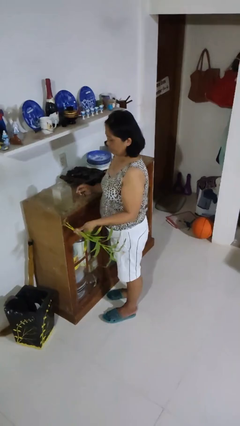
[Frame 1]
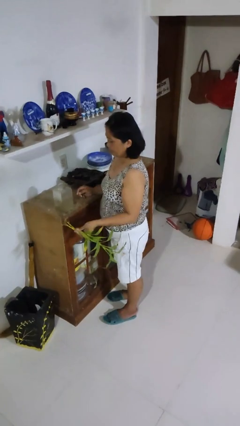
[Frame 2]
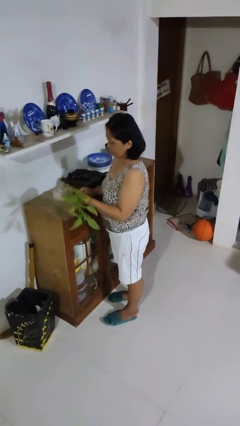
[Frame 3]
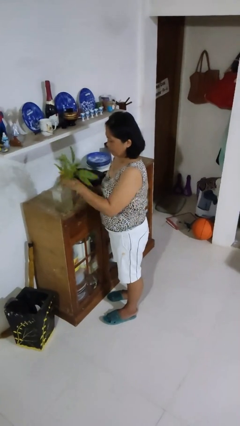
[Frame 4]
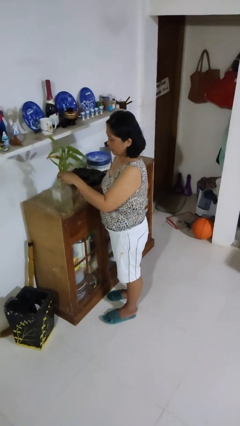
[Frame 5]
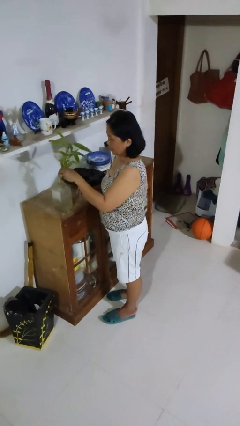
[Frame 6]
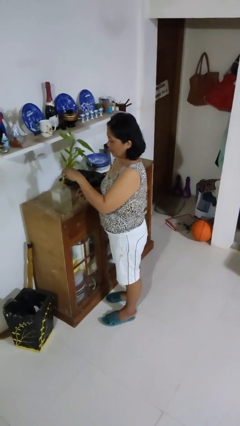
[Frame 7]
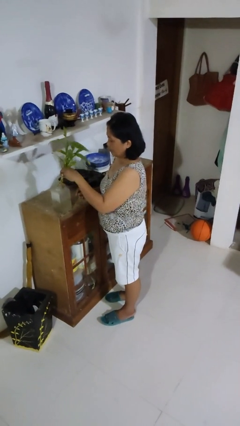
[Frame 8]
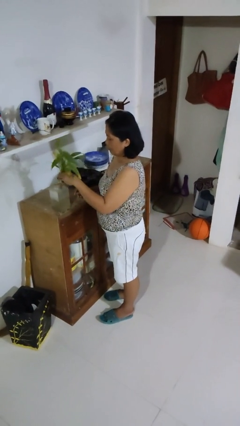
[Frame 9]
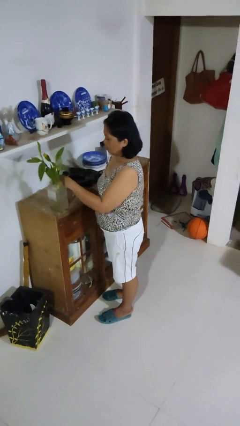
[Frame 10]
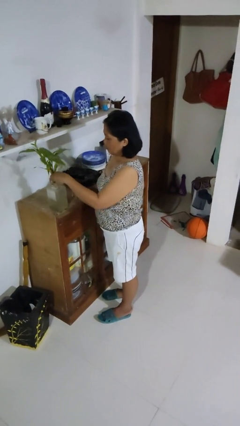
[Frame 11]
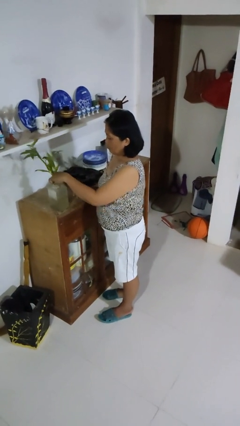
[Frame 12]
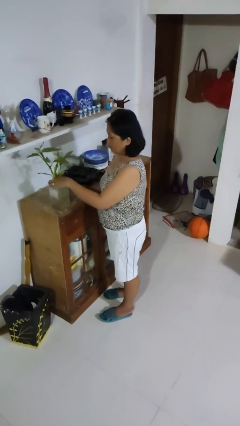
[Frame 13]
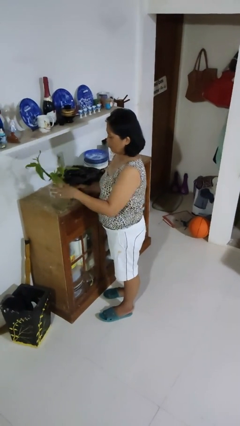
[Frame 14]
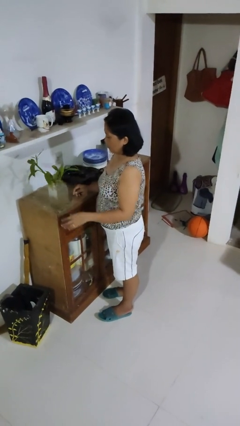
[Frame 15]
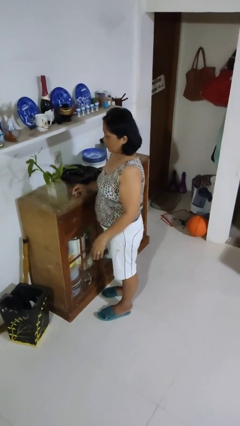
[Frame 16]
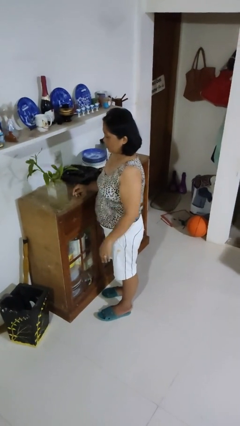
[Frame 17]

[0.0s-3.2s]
person arranges flowers in vase

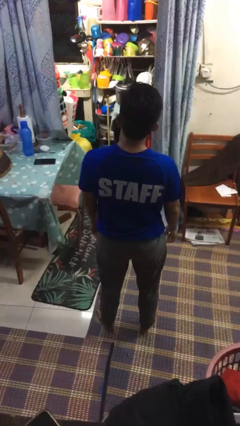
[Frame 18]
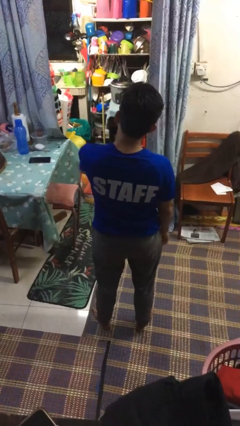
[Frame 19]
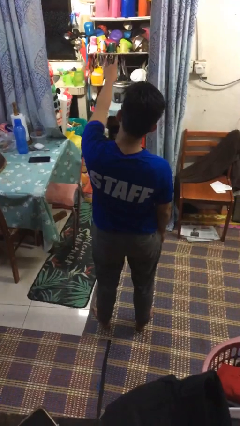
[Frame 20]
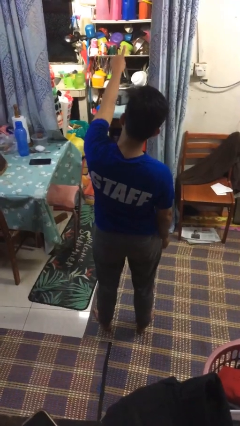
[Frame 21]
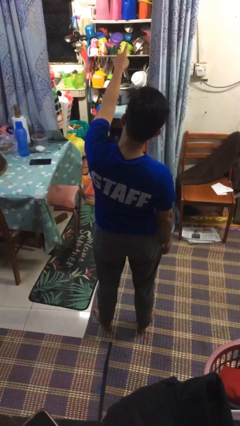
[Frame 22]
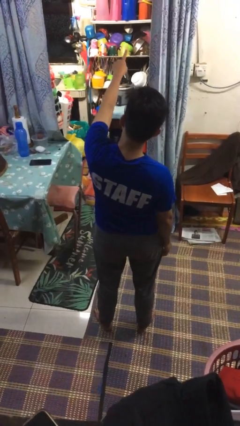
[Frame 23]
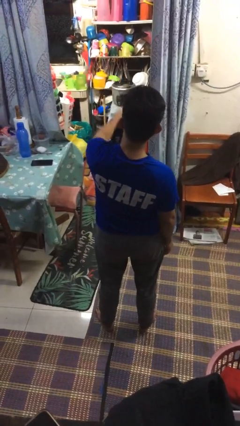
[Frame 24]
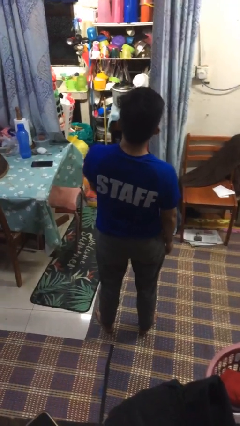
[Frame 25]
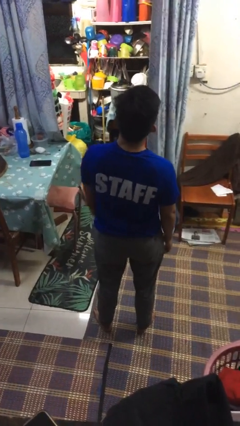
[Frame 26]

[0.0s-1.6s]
person points at person

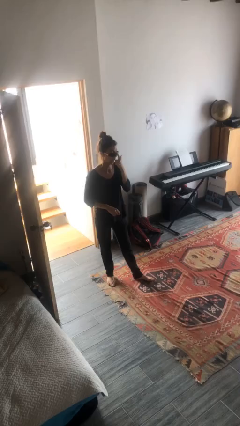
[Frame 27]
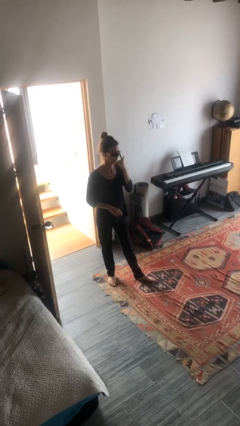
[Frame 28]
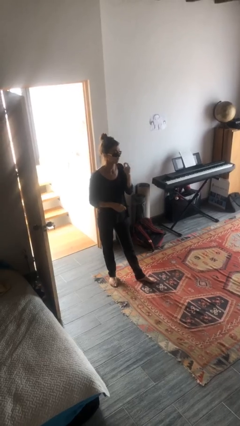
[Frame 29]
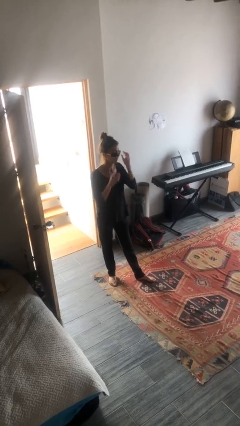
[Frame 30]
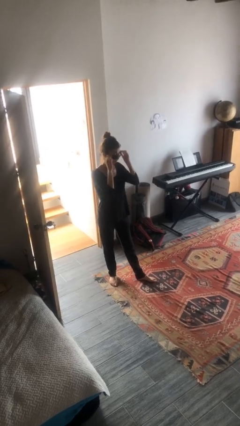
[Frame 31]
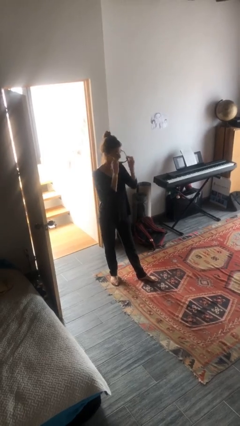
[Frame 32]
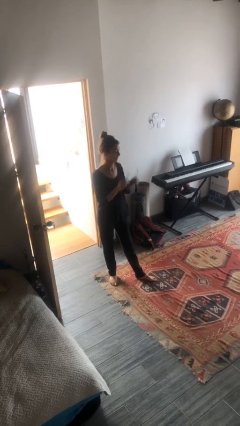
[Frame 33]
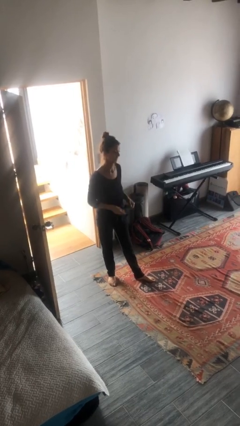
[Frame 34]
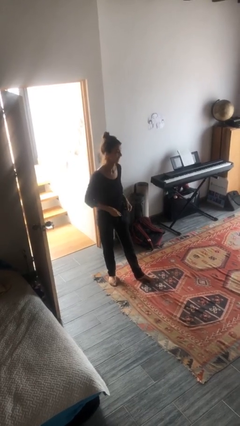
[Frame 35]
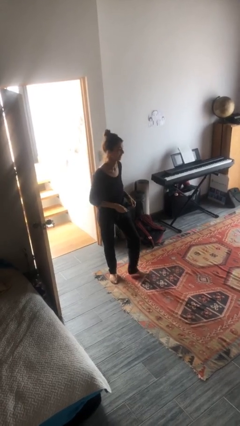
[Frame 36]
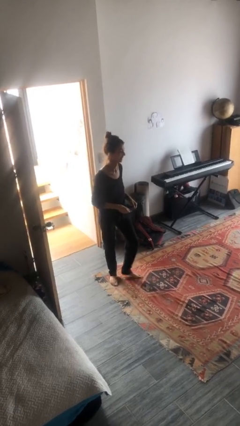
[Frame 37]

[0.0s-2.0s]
person takes off sunglasses

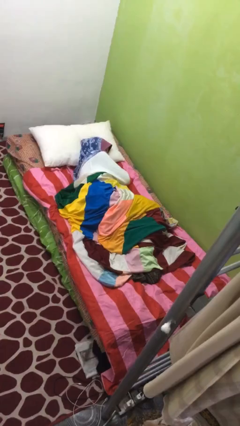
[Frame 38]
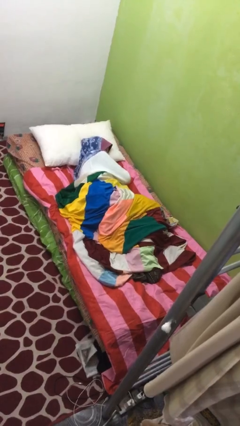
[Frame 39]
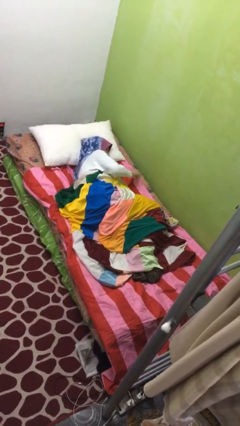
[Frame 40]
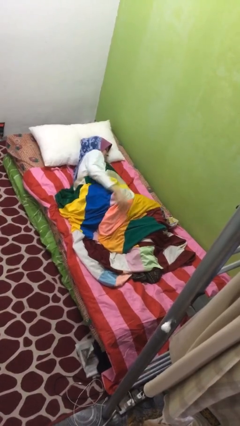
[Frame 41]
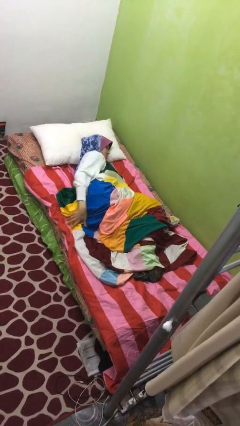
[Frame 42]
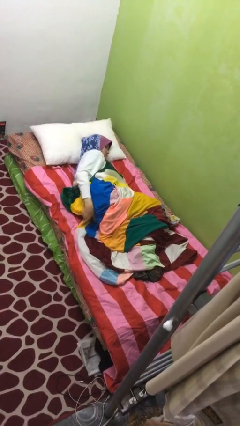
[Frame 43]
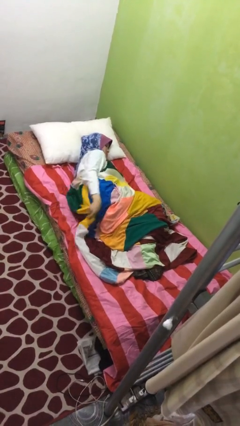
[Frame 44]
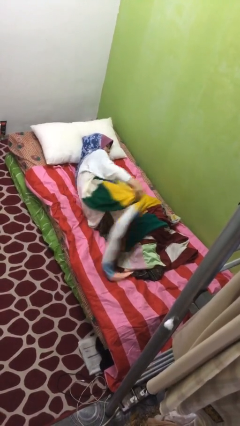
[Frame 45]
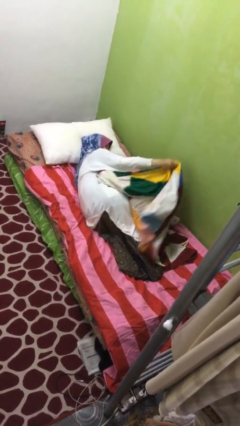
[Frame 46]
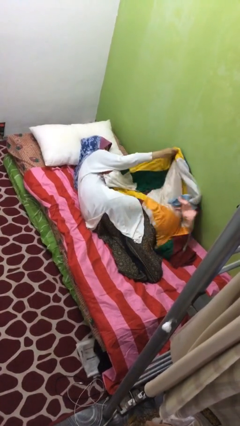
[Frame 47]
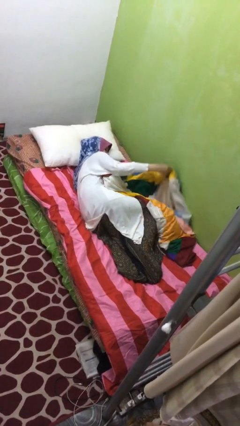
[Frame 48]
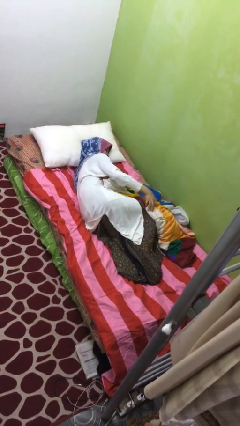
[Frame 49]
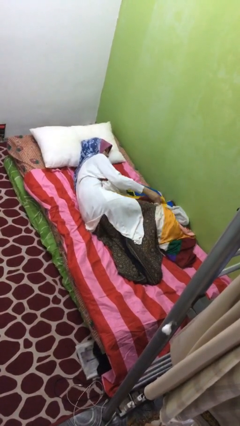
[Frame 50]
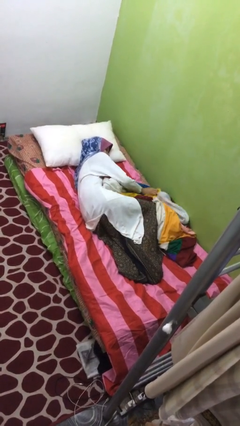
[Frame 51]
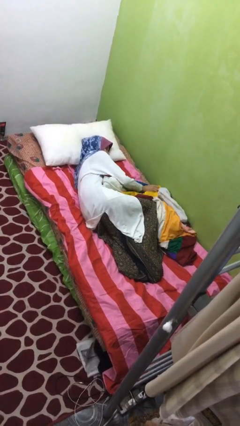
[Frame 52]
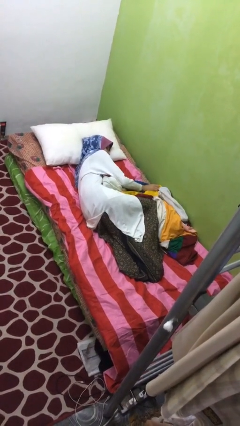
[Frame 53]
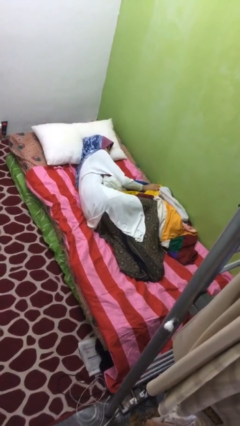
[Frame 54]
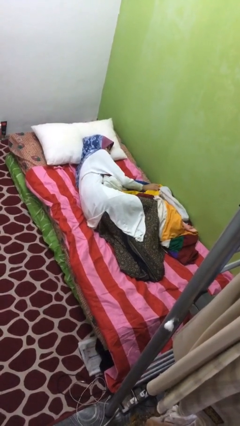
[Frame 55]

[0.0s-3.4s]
person uncovers with blanket

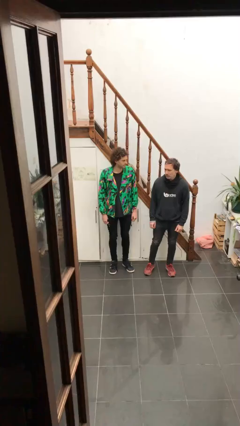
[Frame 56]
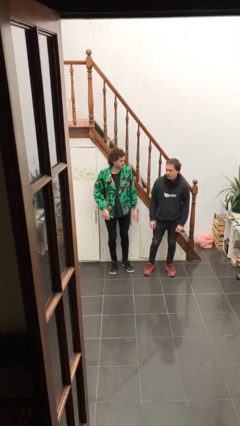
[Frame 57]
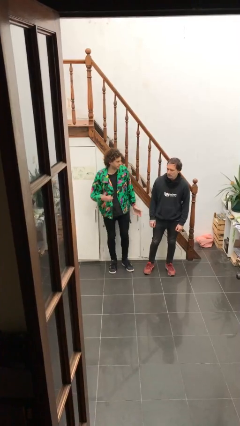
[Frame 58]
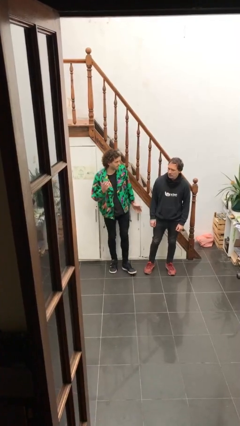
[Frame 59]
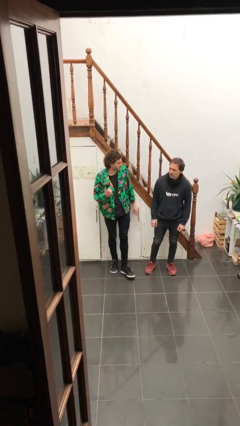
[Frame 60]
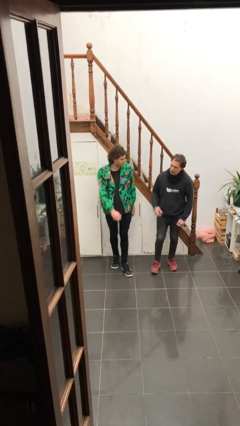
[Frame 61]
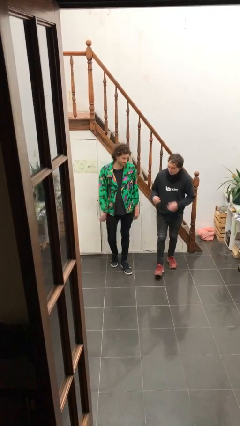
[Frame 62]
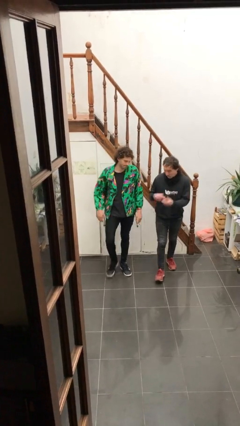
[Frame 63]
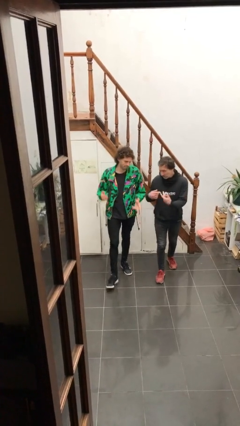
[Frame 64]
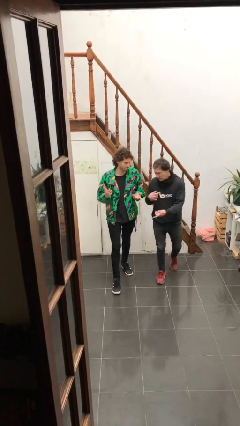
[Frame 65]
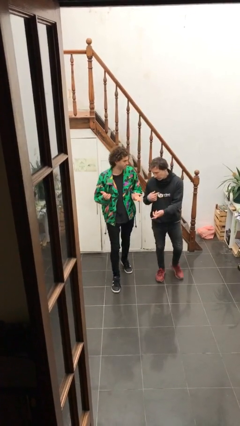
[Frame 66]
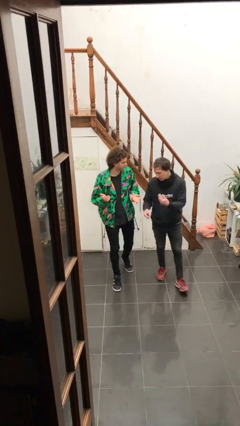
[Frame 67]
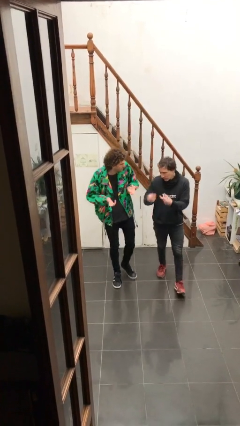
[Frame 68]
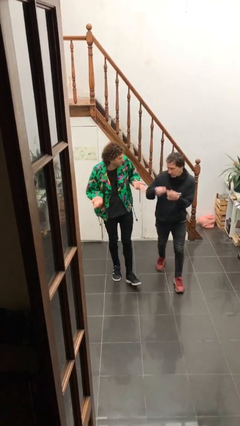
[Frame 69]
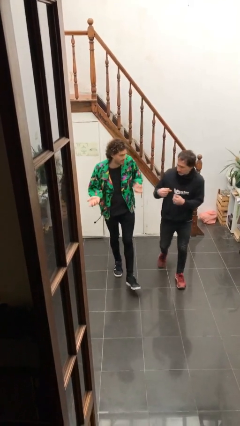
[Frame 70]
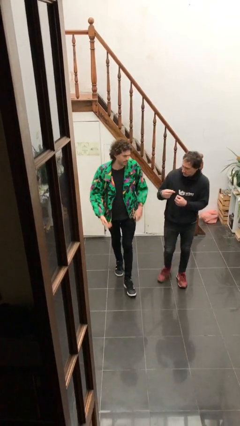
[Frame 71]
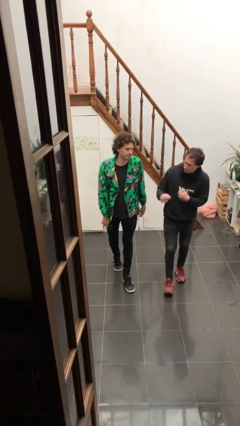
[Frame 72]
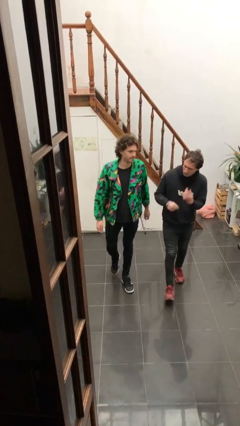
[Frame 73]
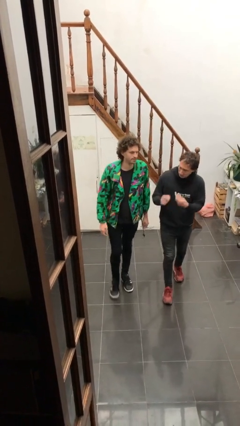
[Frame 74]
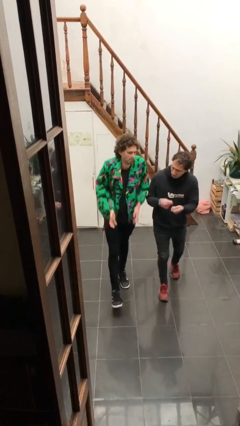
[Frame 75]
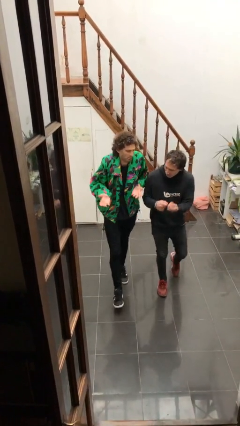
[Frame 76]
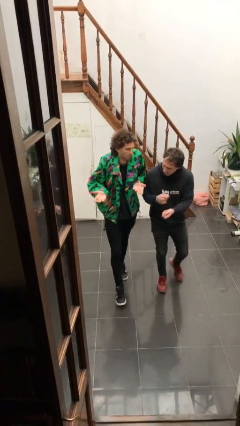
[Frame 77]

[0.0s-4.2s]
person talks to person

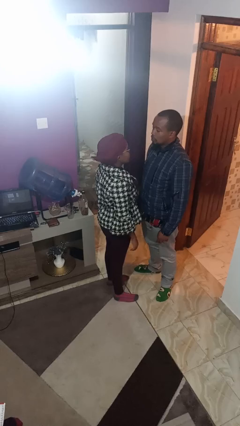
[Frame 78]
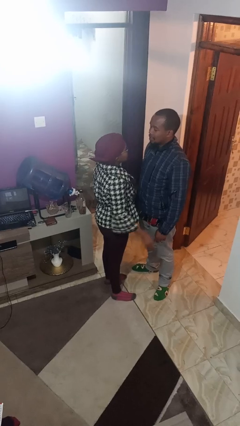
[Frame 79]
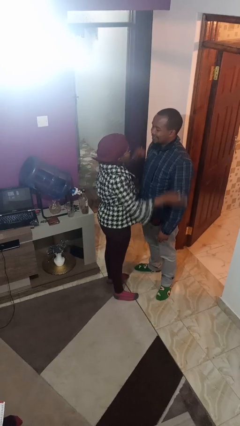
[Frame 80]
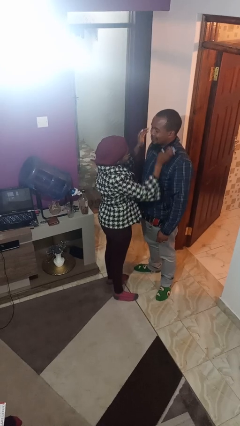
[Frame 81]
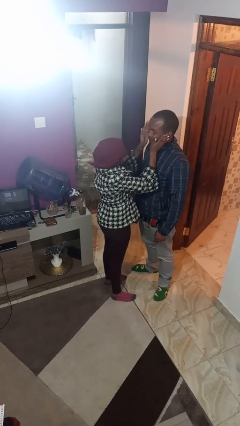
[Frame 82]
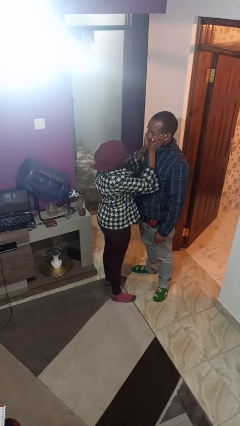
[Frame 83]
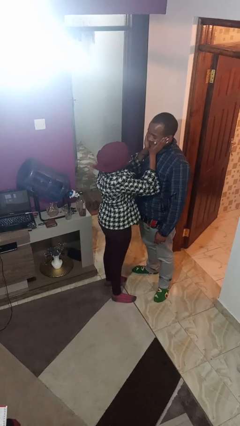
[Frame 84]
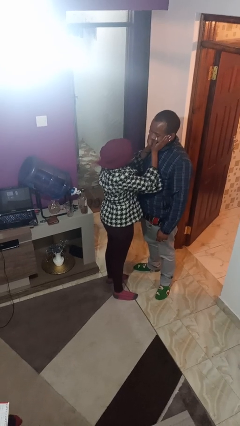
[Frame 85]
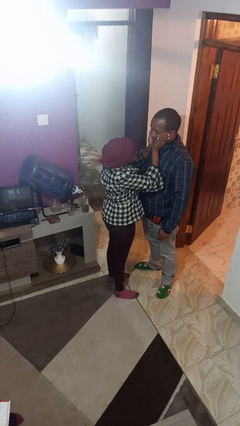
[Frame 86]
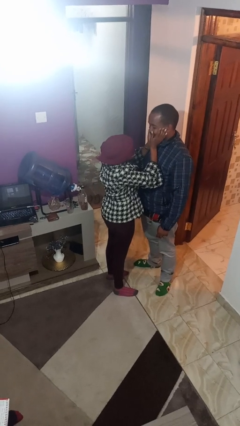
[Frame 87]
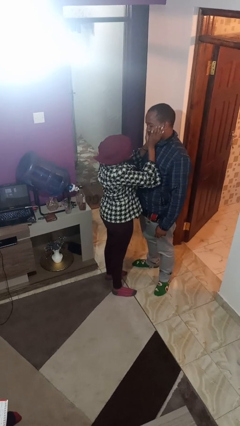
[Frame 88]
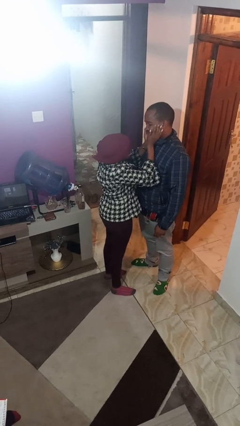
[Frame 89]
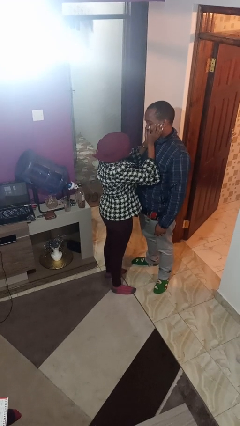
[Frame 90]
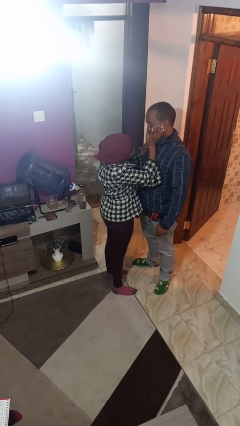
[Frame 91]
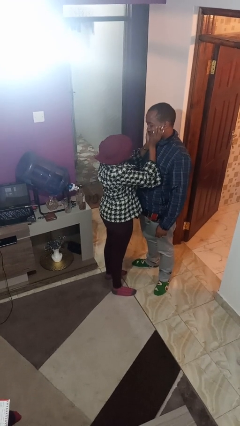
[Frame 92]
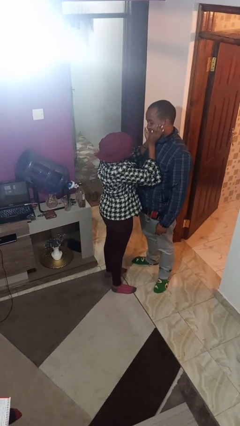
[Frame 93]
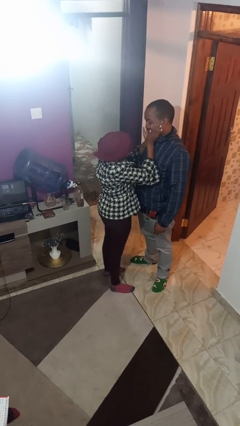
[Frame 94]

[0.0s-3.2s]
person touches face of person
